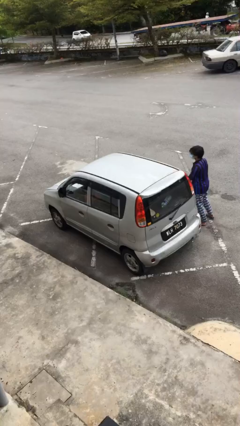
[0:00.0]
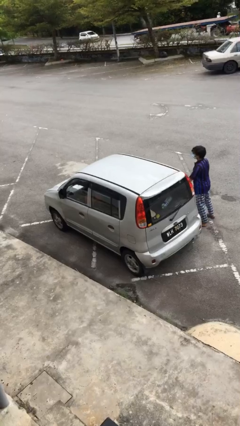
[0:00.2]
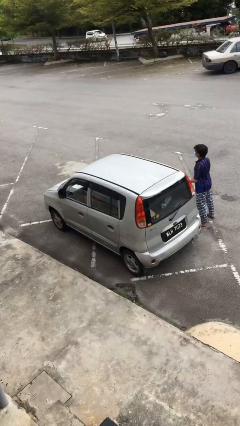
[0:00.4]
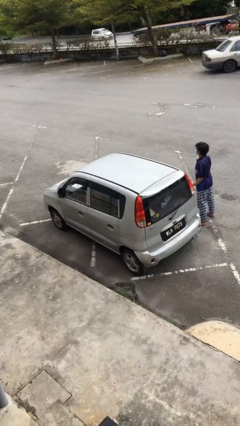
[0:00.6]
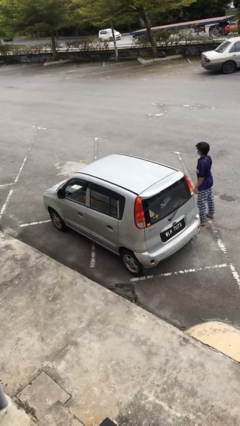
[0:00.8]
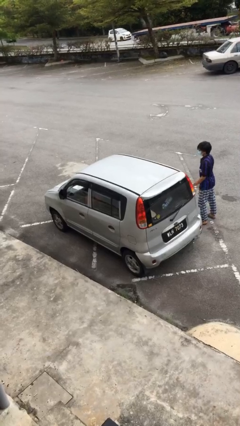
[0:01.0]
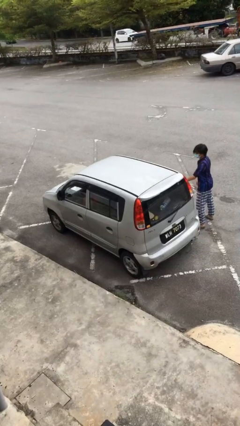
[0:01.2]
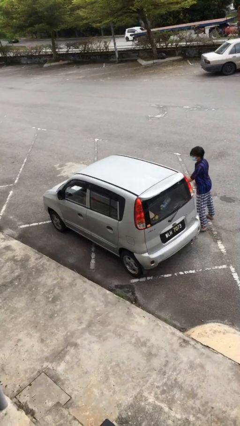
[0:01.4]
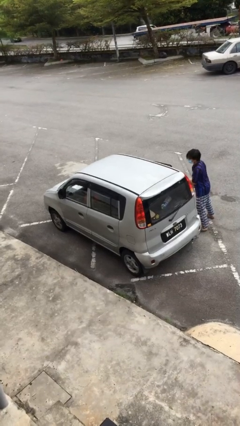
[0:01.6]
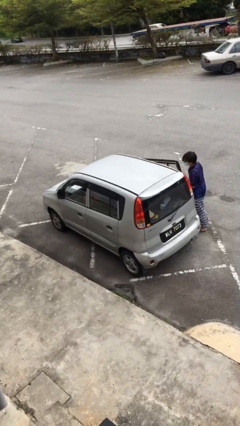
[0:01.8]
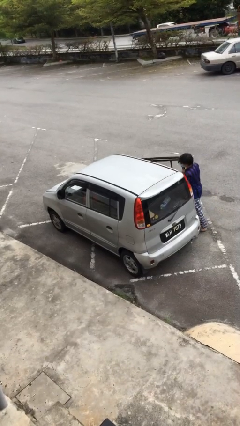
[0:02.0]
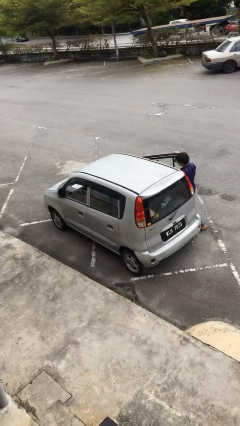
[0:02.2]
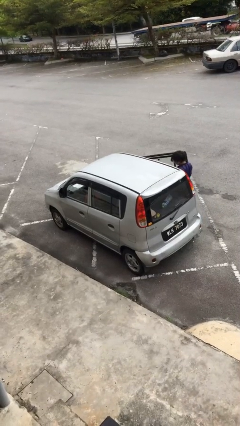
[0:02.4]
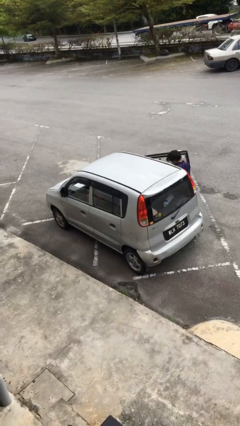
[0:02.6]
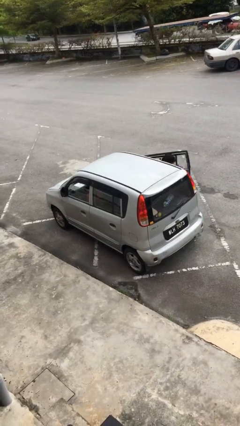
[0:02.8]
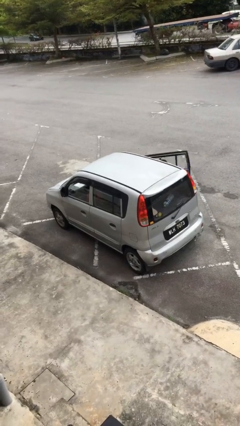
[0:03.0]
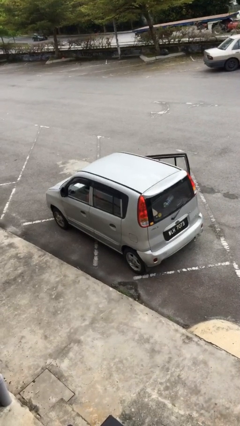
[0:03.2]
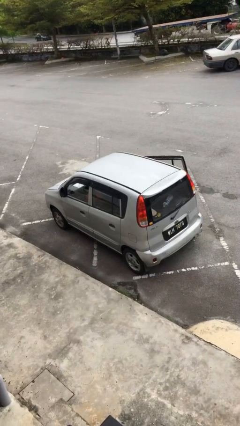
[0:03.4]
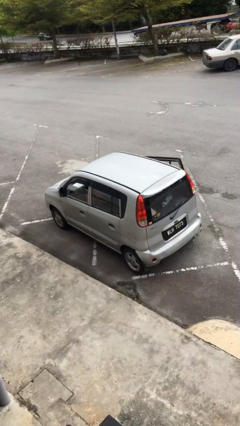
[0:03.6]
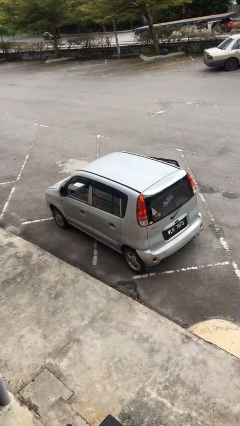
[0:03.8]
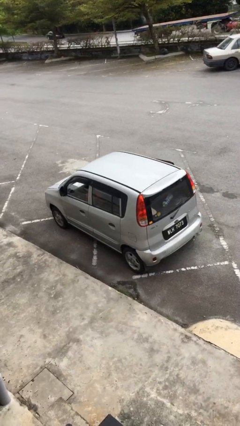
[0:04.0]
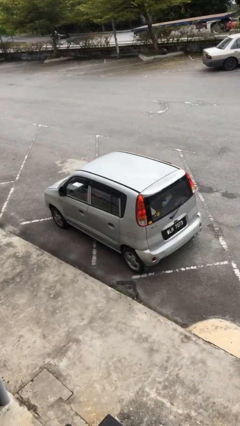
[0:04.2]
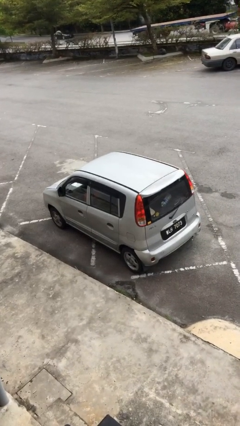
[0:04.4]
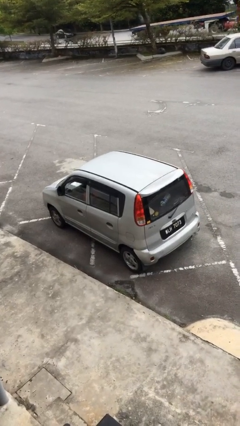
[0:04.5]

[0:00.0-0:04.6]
car picks up person

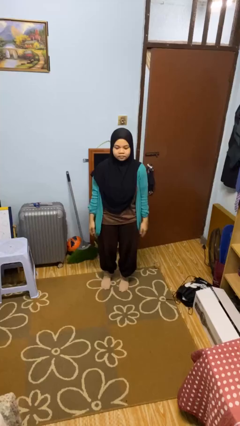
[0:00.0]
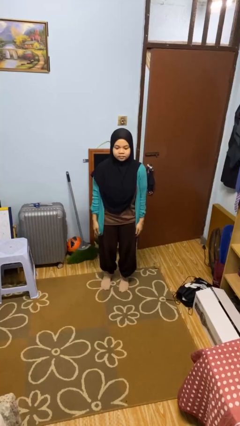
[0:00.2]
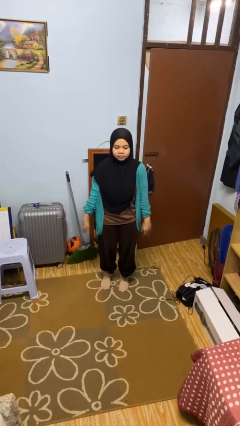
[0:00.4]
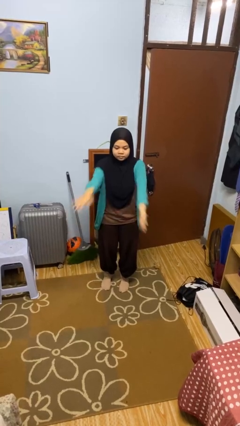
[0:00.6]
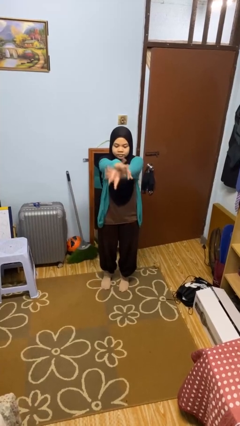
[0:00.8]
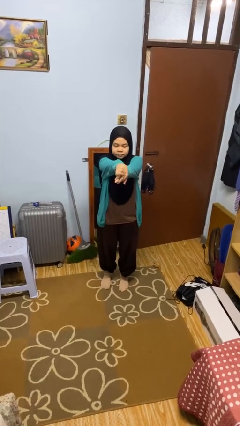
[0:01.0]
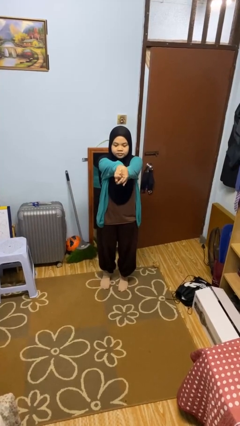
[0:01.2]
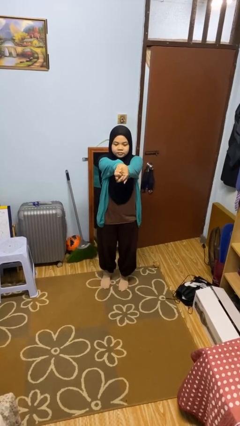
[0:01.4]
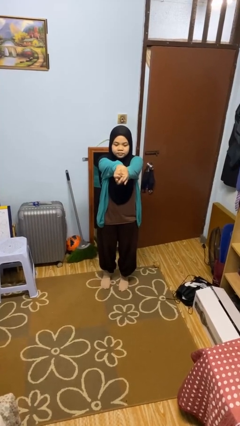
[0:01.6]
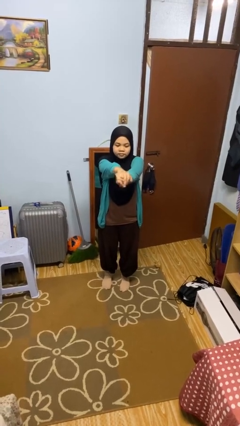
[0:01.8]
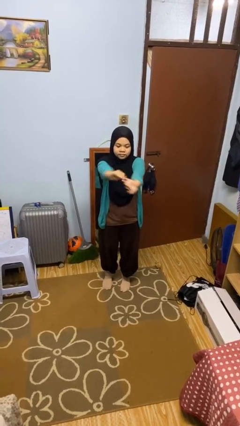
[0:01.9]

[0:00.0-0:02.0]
person crosses arms

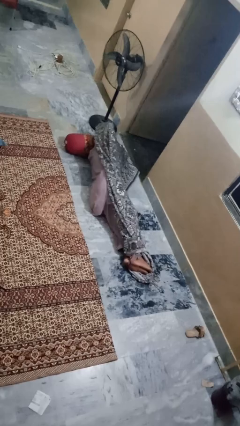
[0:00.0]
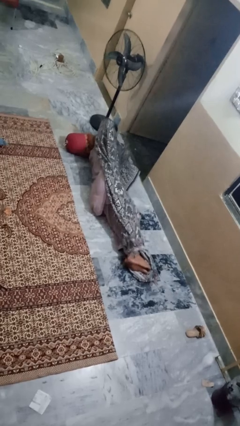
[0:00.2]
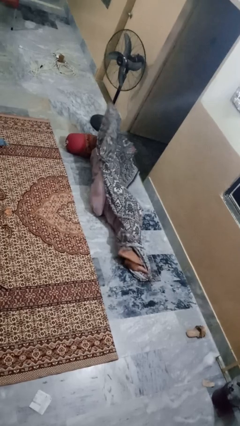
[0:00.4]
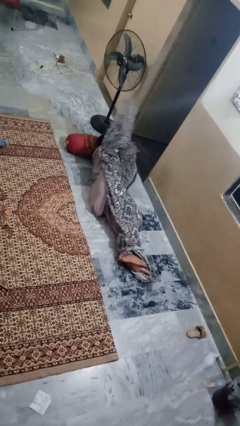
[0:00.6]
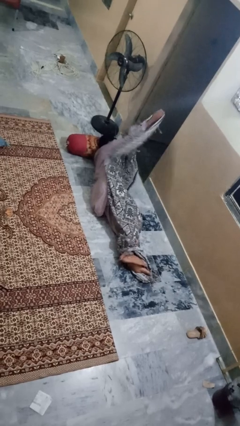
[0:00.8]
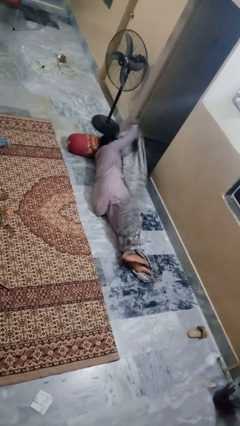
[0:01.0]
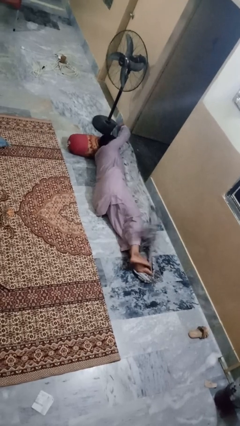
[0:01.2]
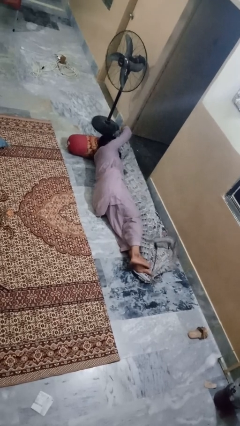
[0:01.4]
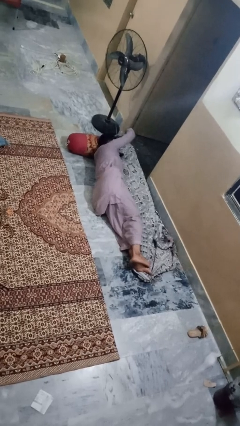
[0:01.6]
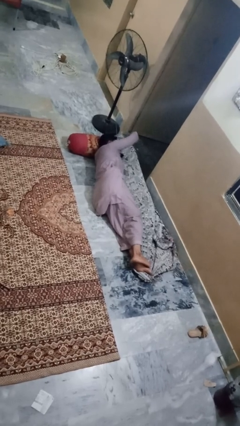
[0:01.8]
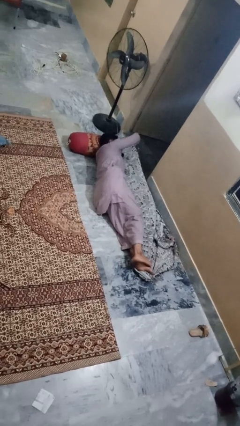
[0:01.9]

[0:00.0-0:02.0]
person uncovers with blanket

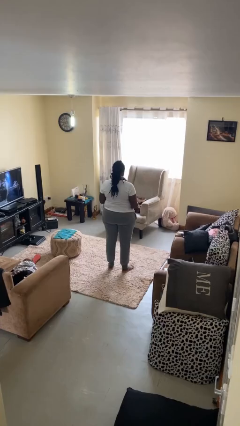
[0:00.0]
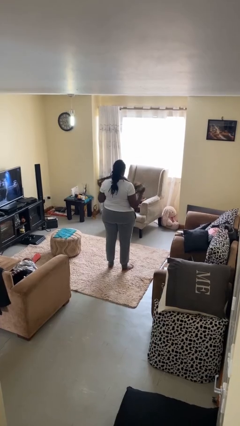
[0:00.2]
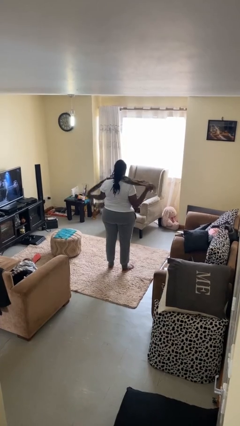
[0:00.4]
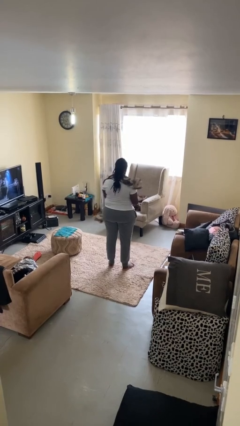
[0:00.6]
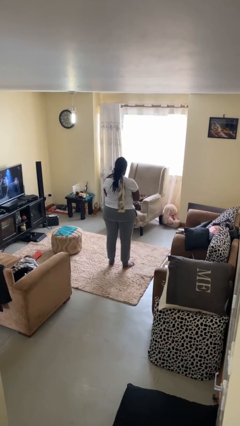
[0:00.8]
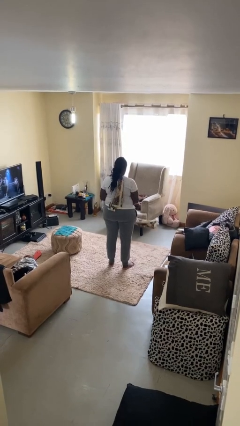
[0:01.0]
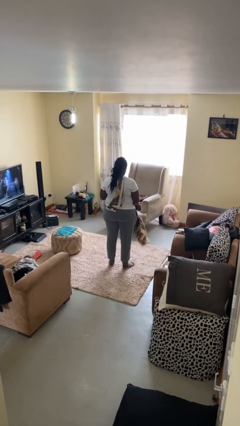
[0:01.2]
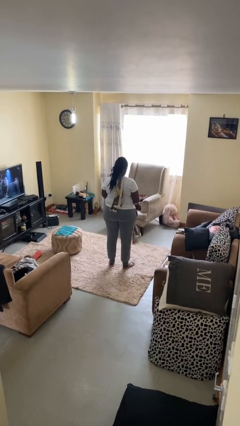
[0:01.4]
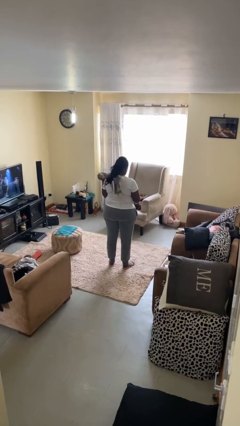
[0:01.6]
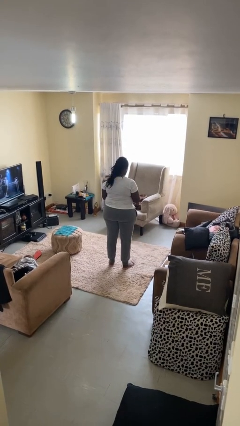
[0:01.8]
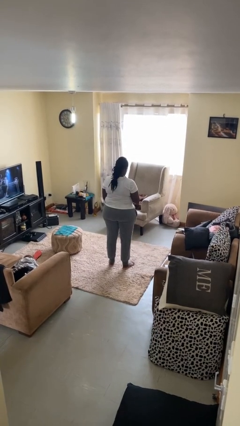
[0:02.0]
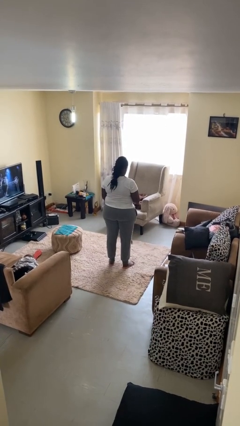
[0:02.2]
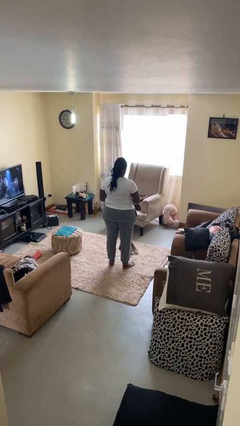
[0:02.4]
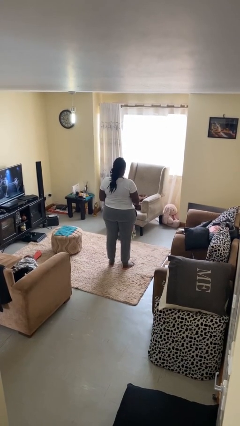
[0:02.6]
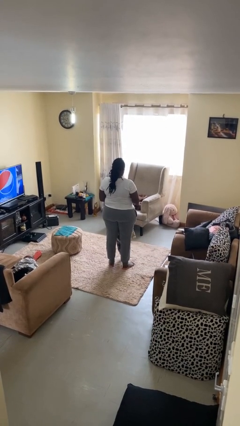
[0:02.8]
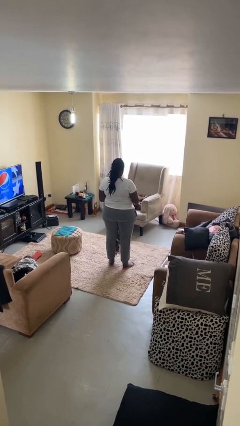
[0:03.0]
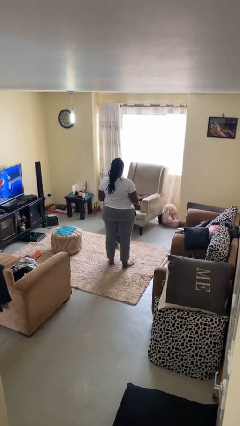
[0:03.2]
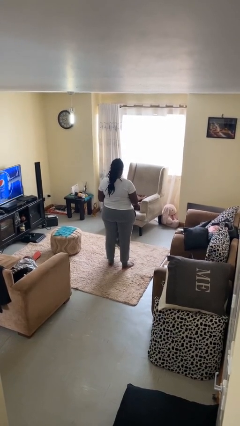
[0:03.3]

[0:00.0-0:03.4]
person takes off scarf

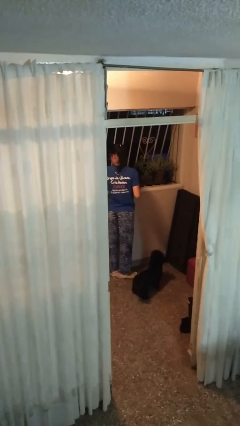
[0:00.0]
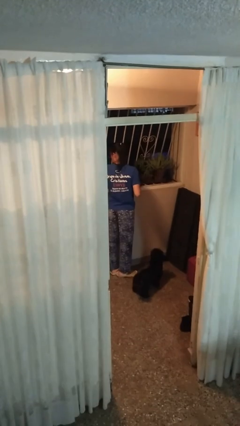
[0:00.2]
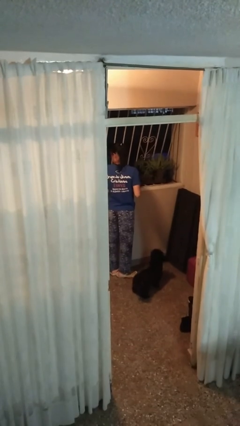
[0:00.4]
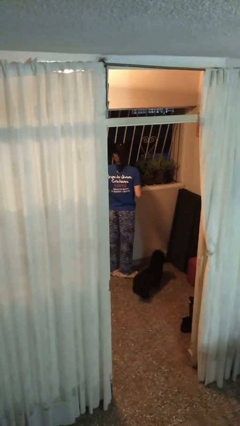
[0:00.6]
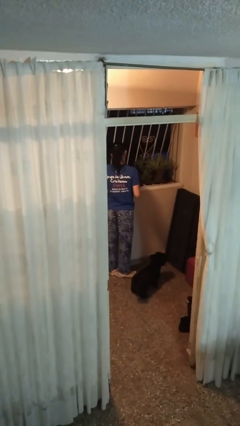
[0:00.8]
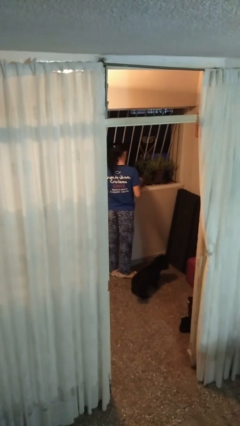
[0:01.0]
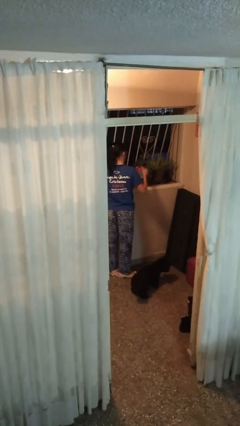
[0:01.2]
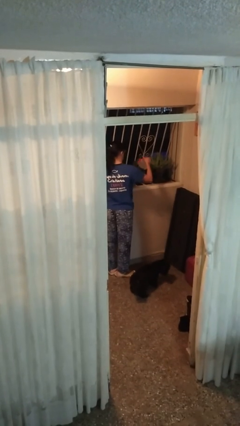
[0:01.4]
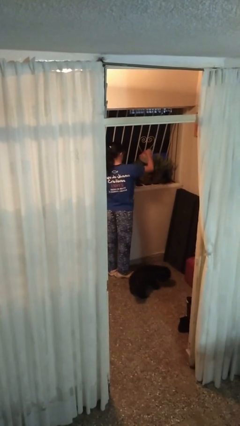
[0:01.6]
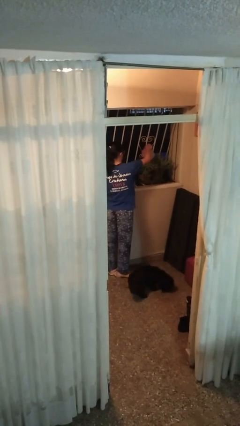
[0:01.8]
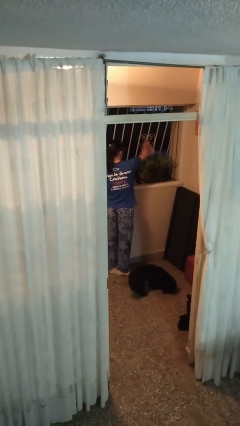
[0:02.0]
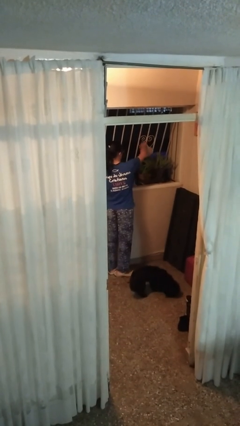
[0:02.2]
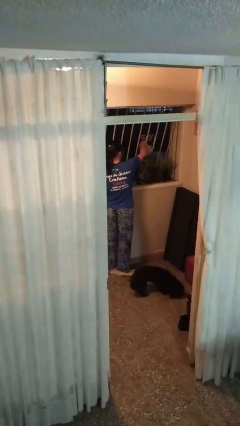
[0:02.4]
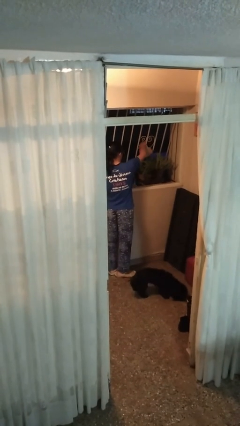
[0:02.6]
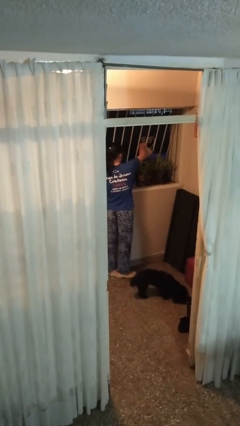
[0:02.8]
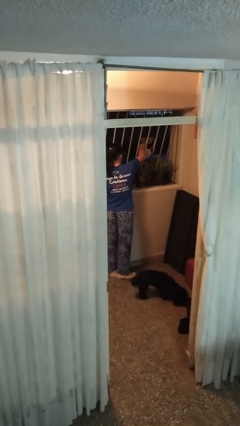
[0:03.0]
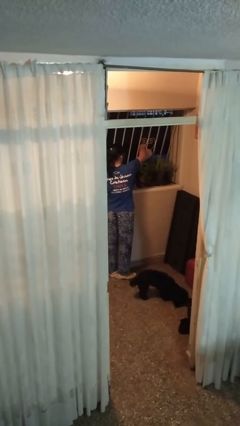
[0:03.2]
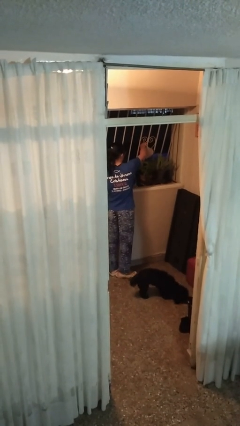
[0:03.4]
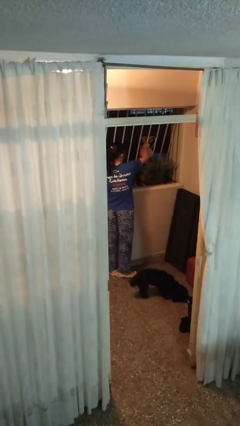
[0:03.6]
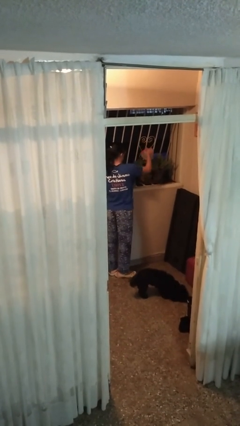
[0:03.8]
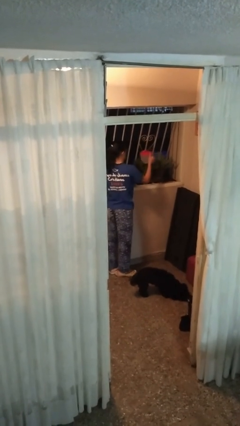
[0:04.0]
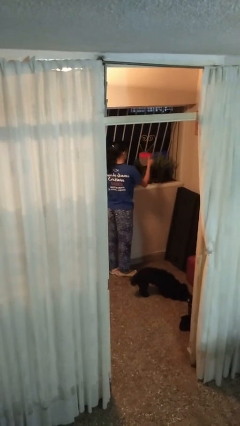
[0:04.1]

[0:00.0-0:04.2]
person waters houseplant

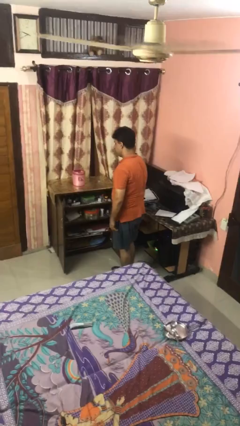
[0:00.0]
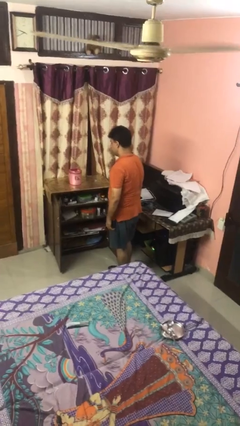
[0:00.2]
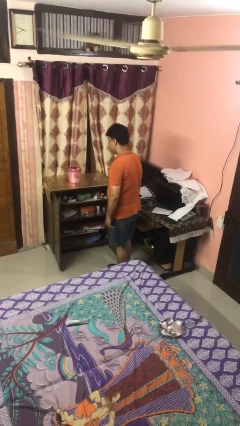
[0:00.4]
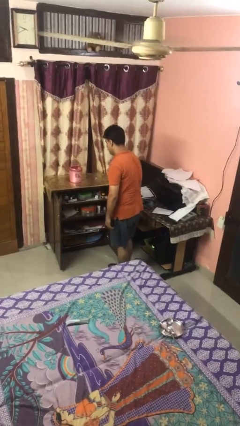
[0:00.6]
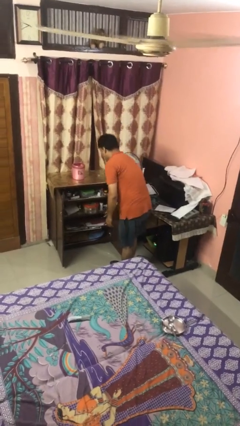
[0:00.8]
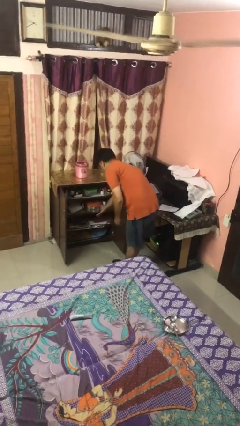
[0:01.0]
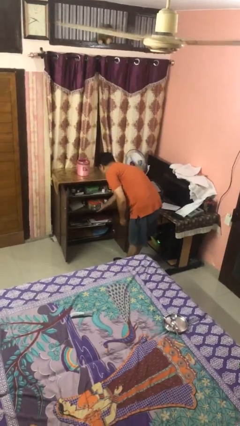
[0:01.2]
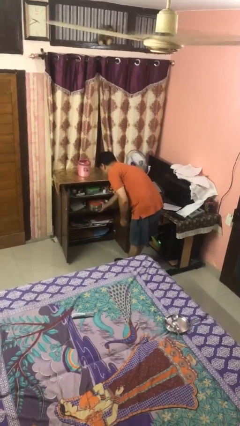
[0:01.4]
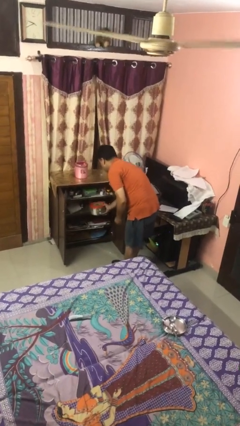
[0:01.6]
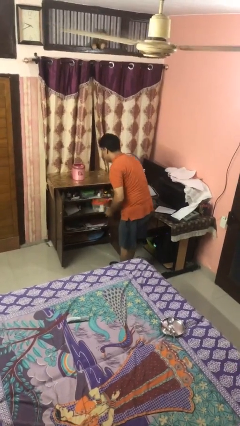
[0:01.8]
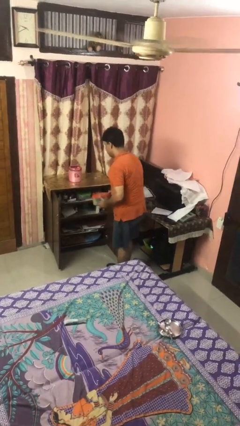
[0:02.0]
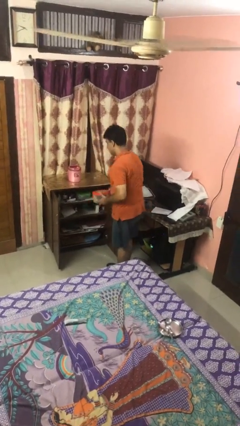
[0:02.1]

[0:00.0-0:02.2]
person picks up object from cabinet
